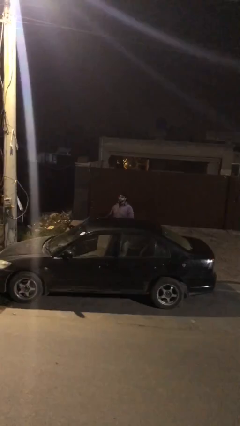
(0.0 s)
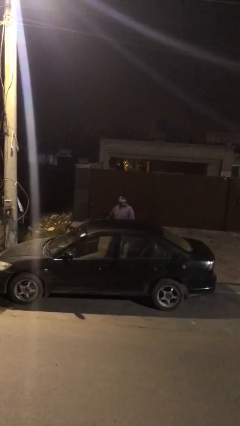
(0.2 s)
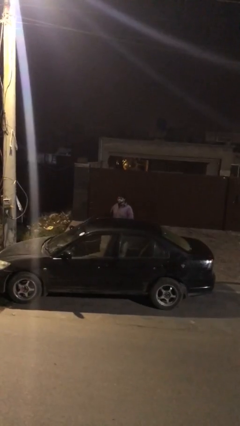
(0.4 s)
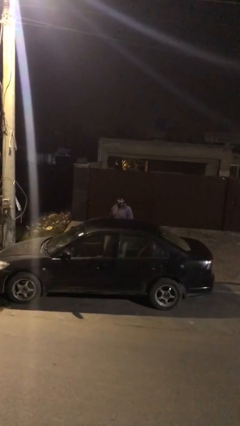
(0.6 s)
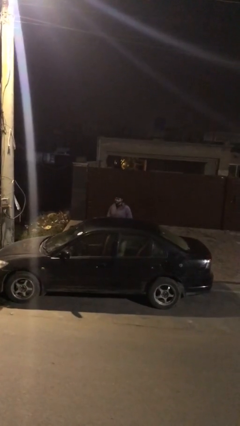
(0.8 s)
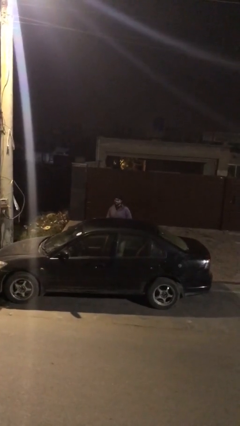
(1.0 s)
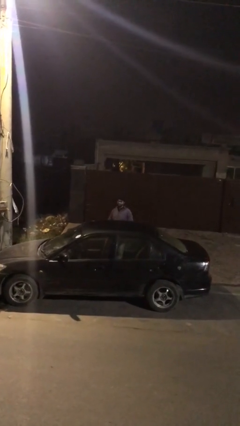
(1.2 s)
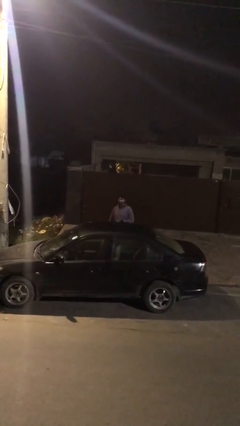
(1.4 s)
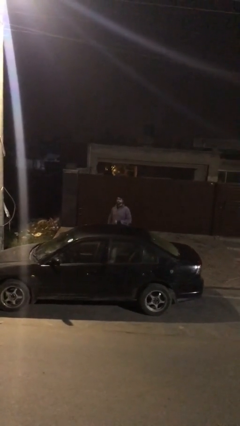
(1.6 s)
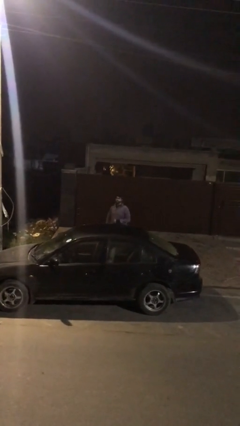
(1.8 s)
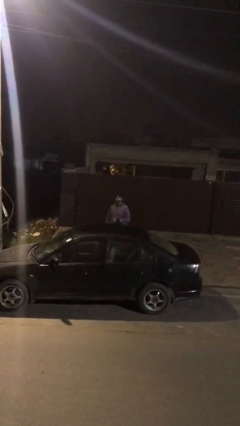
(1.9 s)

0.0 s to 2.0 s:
person closes car door

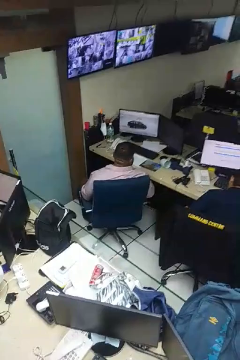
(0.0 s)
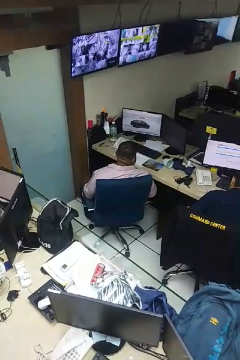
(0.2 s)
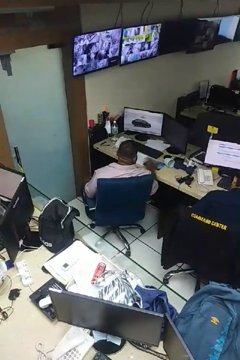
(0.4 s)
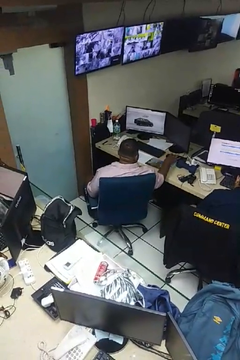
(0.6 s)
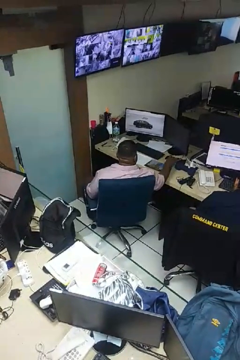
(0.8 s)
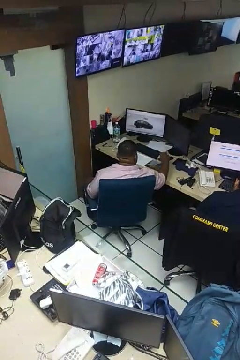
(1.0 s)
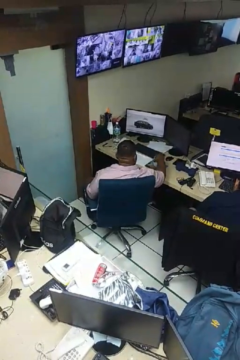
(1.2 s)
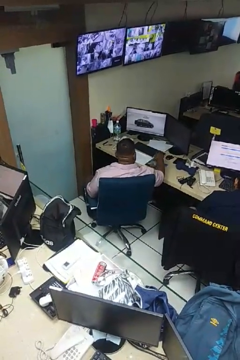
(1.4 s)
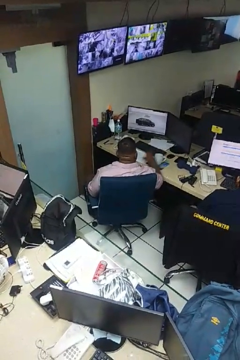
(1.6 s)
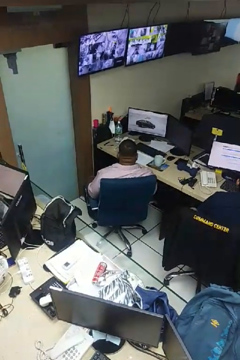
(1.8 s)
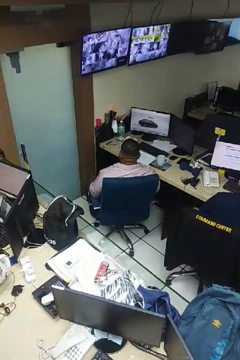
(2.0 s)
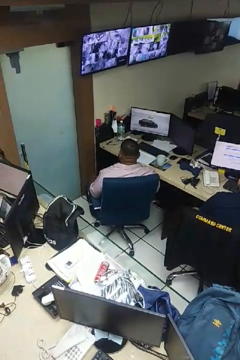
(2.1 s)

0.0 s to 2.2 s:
person sets upright glass

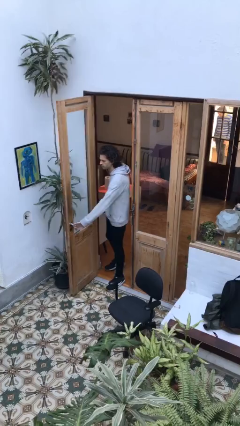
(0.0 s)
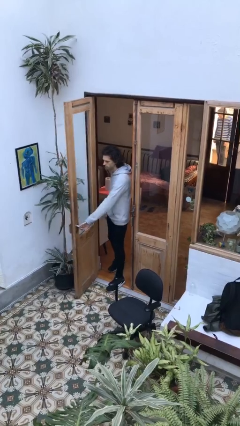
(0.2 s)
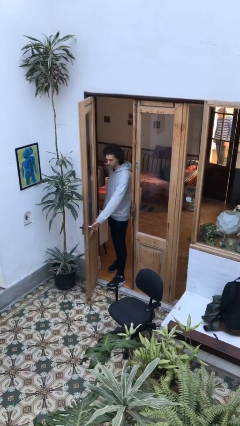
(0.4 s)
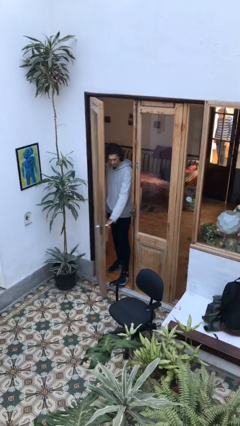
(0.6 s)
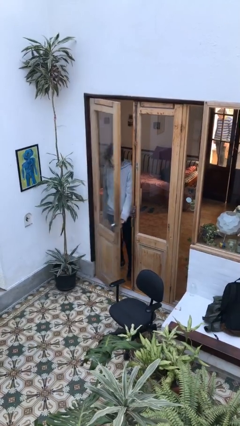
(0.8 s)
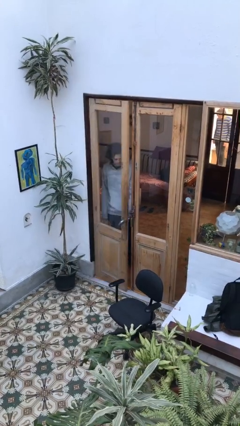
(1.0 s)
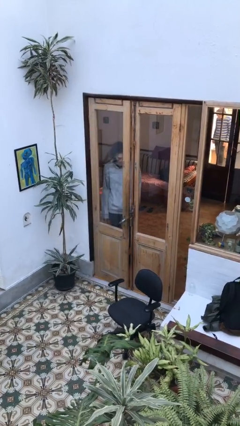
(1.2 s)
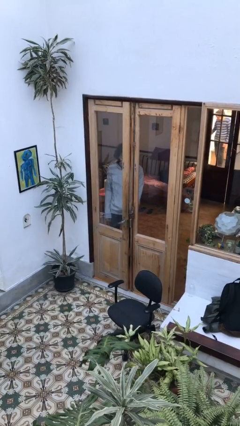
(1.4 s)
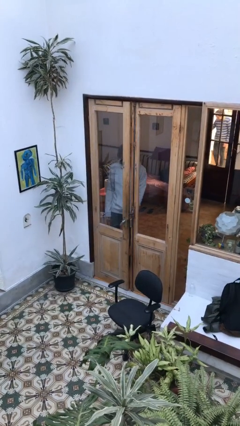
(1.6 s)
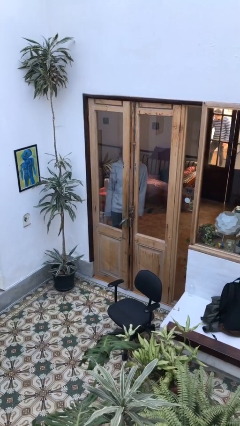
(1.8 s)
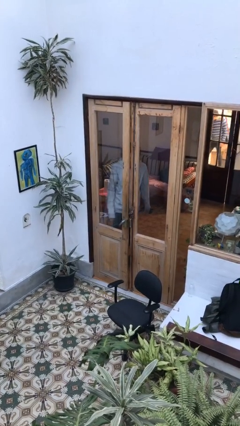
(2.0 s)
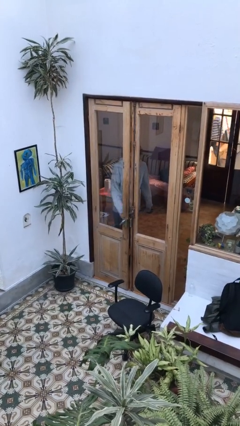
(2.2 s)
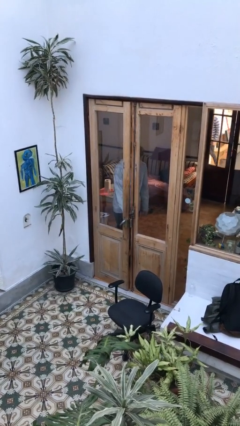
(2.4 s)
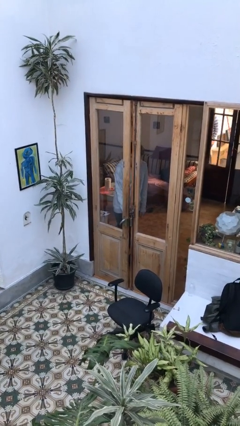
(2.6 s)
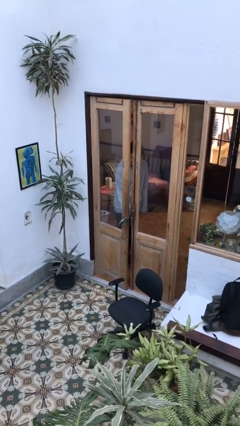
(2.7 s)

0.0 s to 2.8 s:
person closes facility door

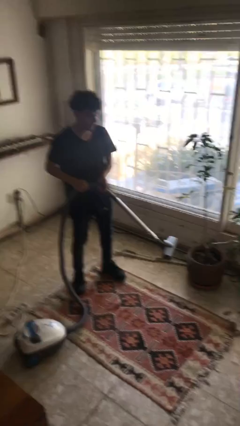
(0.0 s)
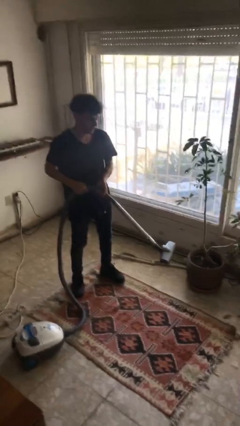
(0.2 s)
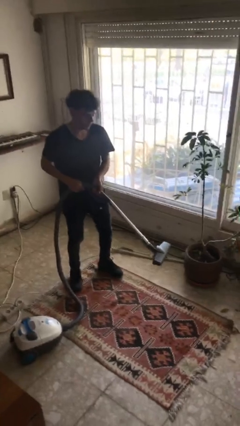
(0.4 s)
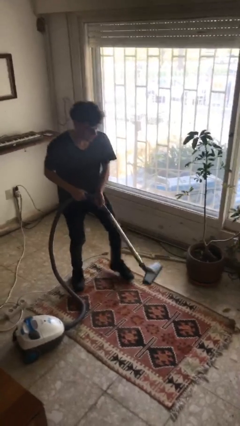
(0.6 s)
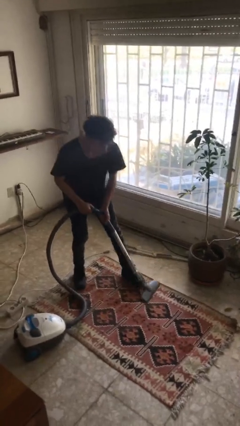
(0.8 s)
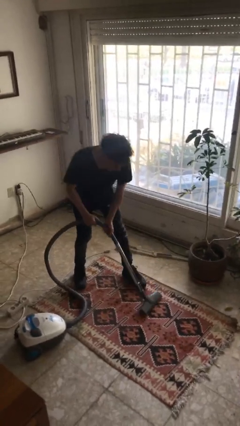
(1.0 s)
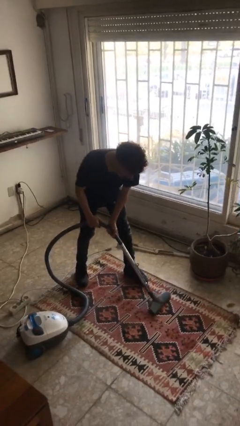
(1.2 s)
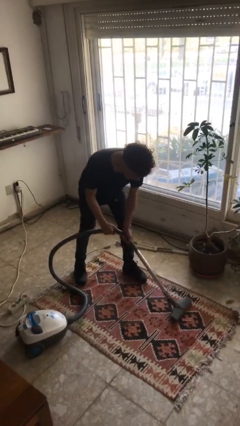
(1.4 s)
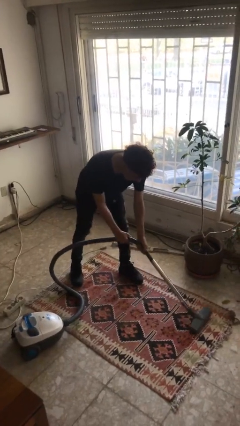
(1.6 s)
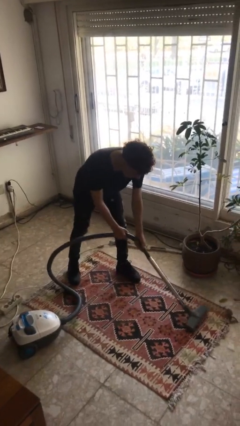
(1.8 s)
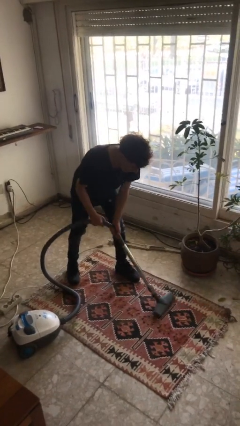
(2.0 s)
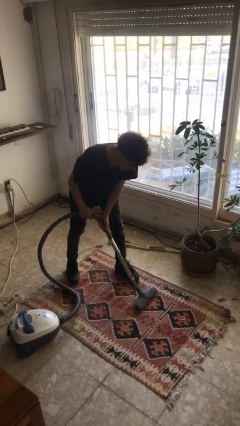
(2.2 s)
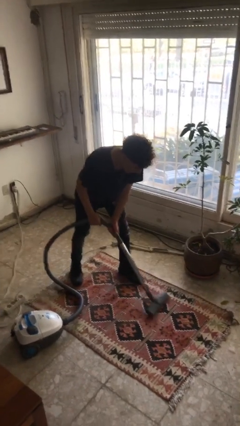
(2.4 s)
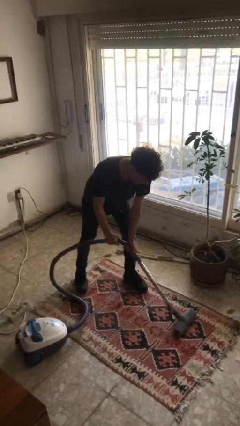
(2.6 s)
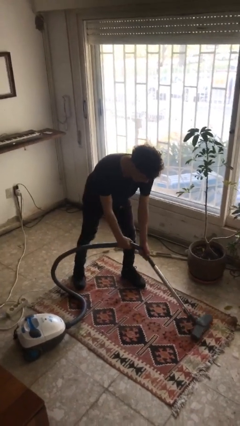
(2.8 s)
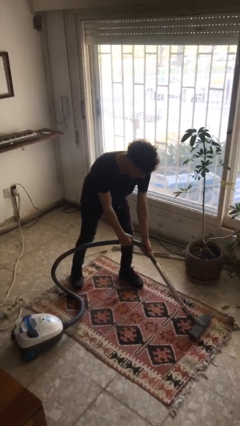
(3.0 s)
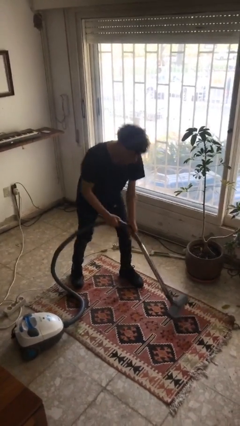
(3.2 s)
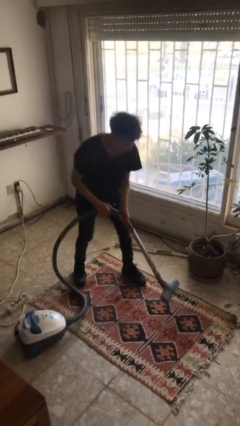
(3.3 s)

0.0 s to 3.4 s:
person vacuums carpet

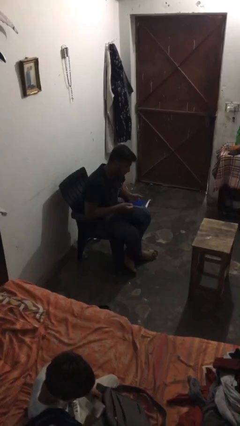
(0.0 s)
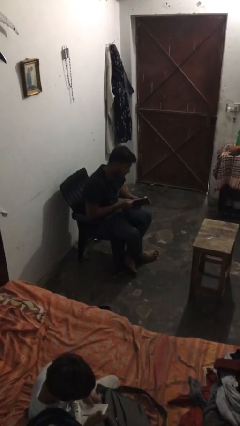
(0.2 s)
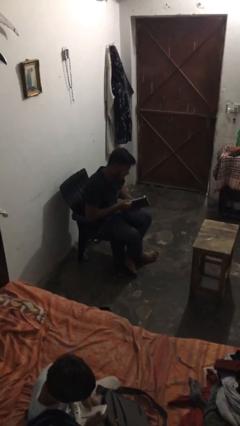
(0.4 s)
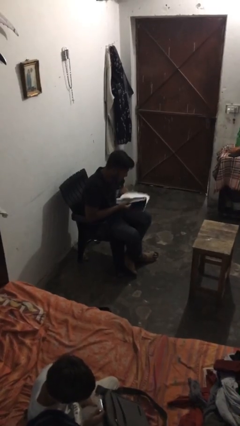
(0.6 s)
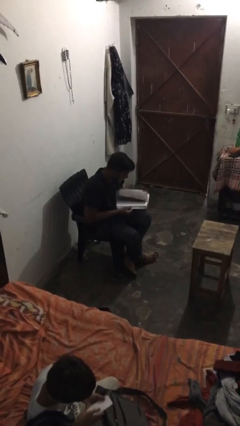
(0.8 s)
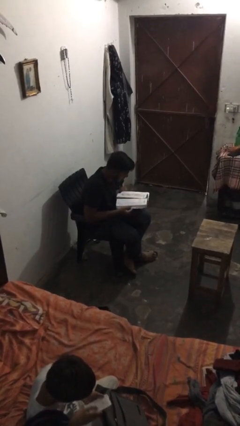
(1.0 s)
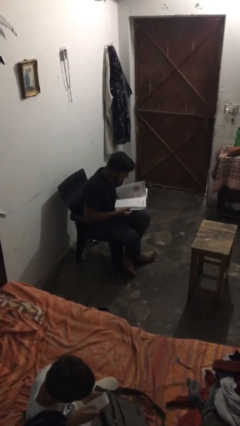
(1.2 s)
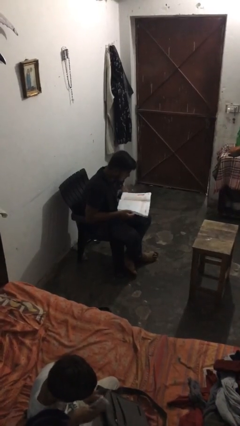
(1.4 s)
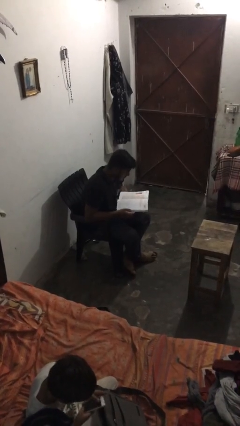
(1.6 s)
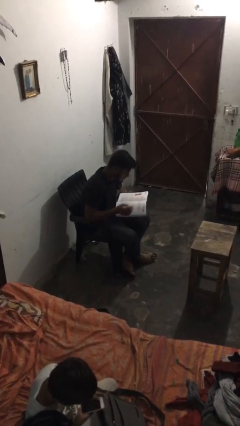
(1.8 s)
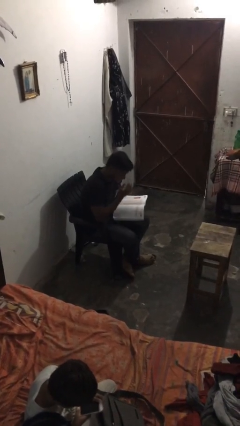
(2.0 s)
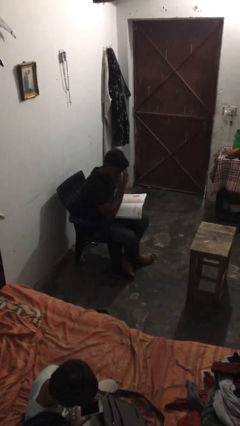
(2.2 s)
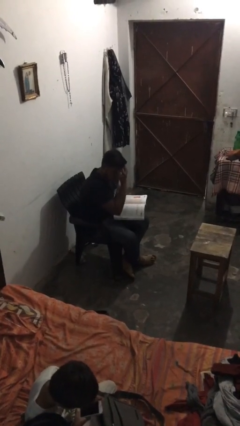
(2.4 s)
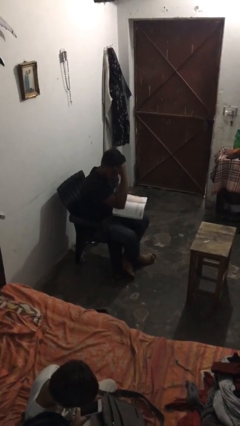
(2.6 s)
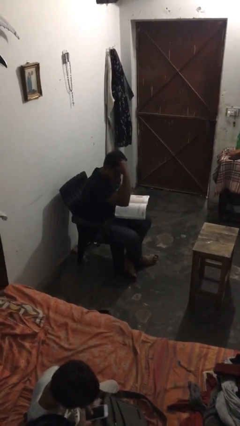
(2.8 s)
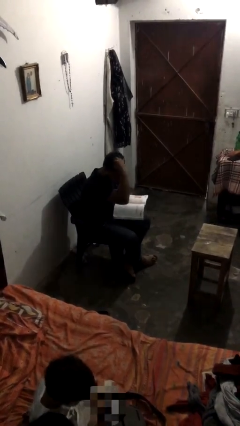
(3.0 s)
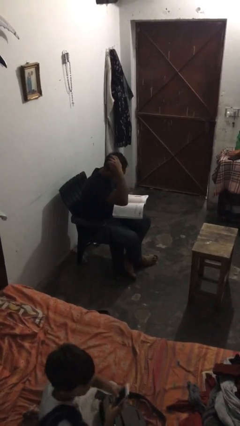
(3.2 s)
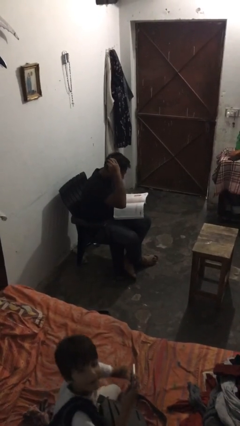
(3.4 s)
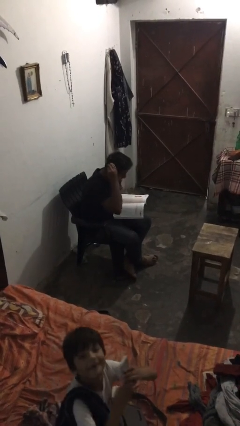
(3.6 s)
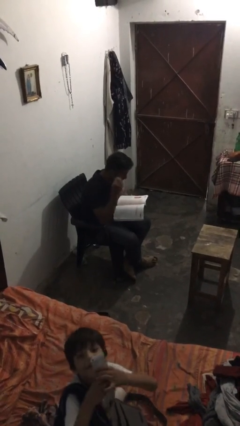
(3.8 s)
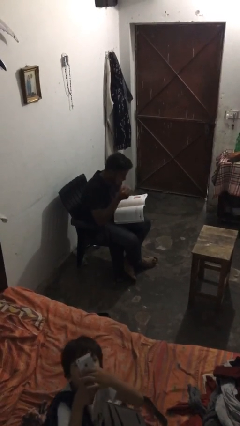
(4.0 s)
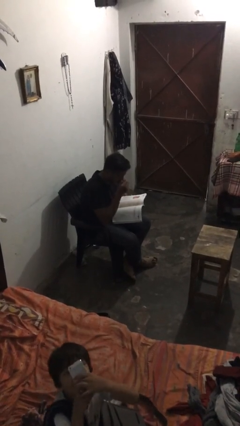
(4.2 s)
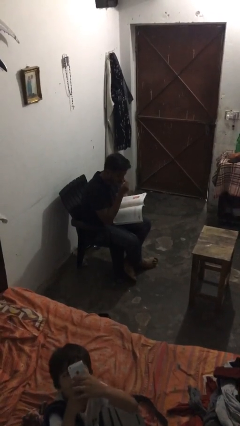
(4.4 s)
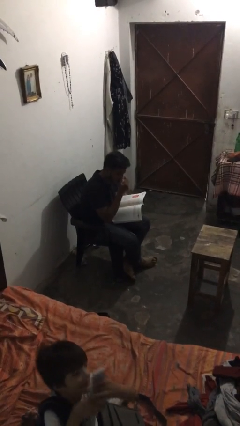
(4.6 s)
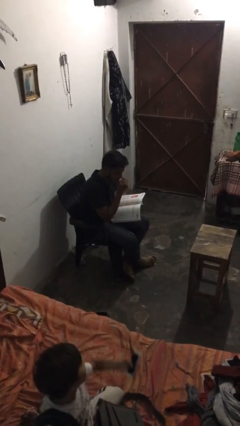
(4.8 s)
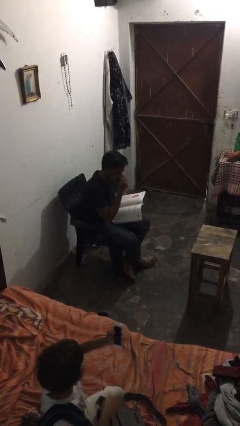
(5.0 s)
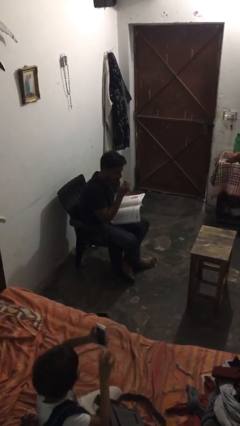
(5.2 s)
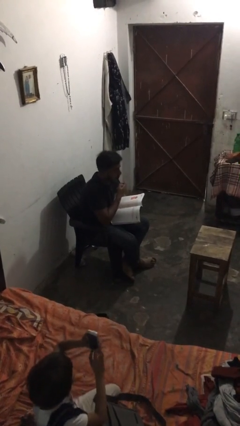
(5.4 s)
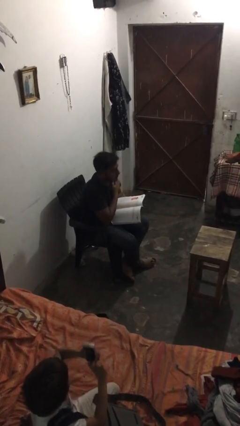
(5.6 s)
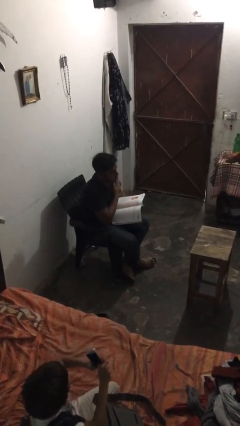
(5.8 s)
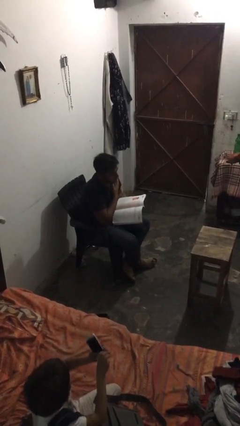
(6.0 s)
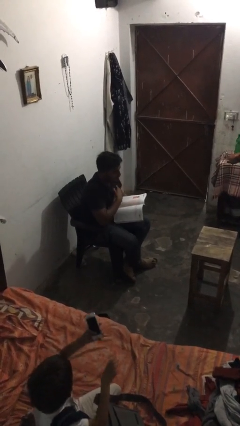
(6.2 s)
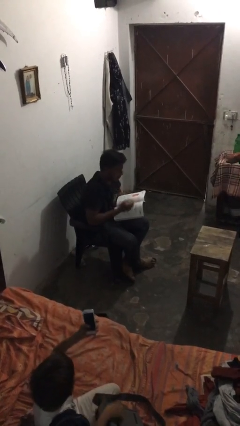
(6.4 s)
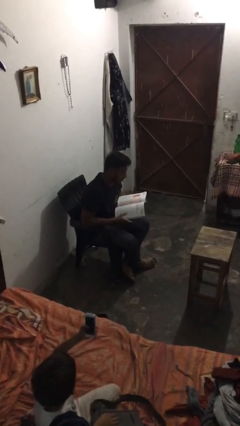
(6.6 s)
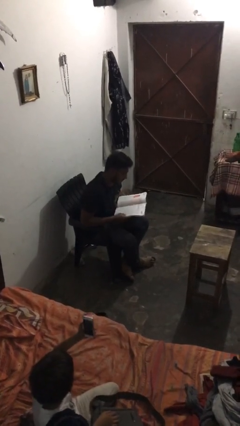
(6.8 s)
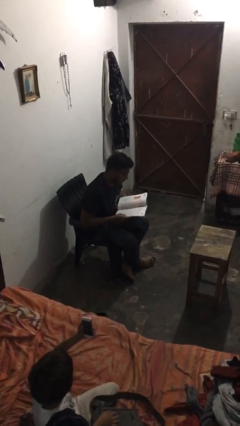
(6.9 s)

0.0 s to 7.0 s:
person reads document

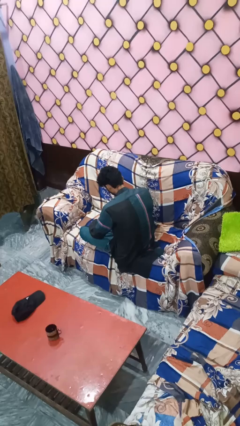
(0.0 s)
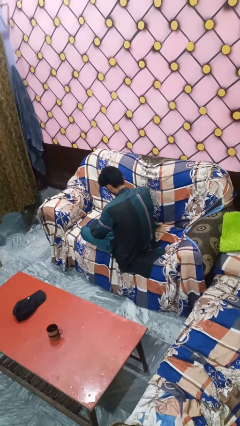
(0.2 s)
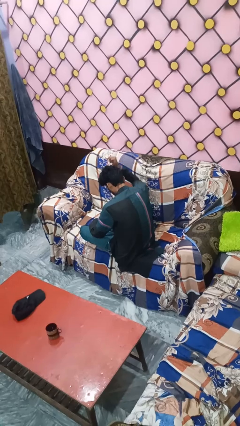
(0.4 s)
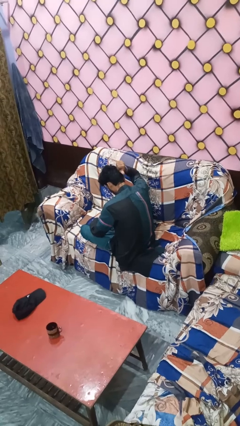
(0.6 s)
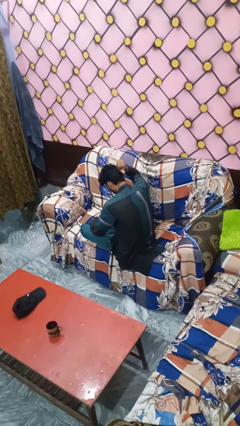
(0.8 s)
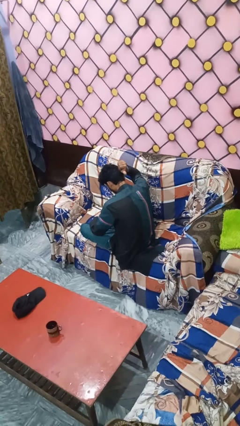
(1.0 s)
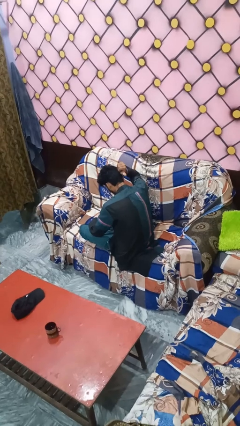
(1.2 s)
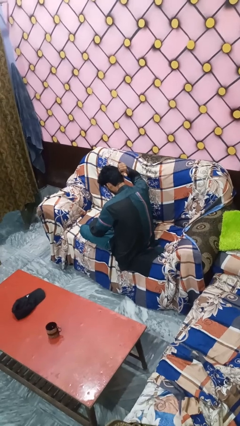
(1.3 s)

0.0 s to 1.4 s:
person gestures behind me
